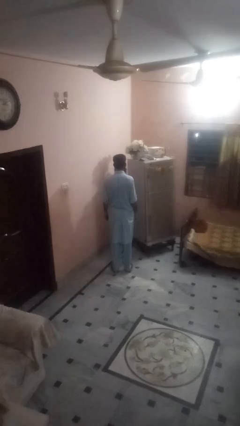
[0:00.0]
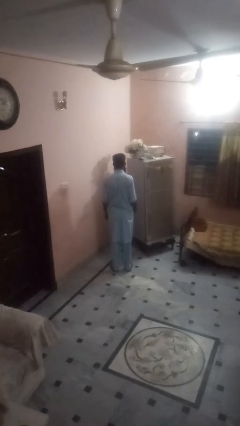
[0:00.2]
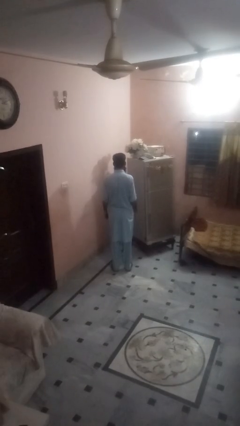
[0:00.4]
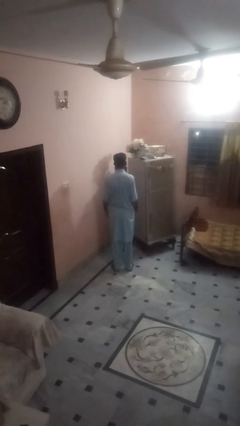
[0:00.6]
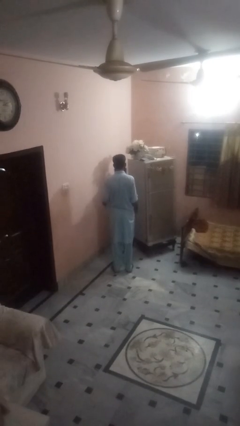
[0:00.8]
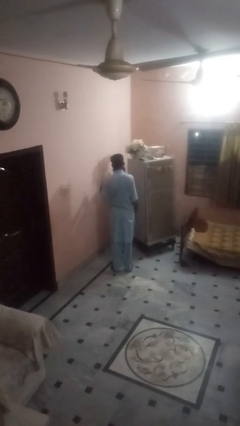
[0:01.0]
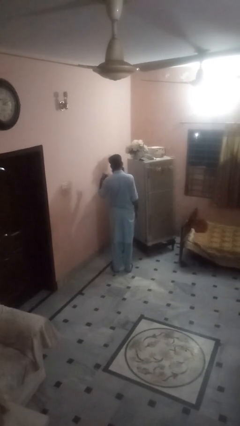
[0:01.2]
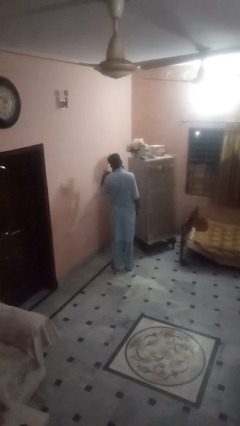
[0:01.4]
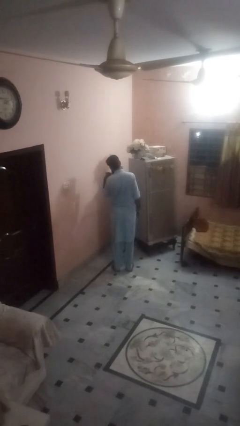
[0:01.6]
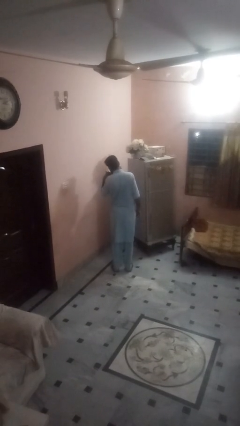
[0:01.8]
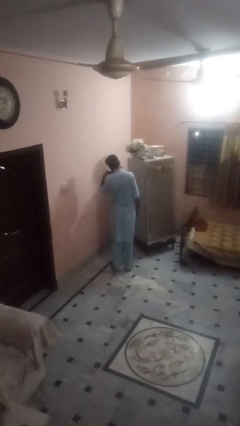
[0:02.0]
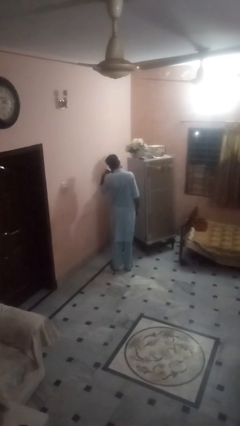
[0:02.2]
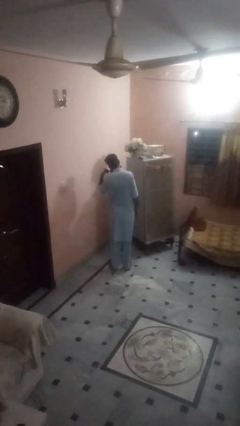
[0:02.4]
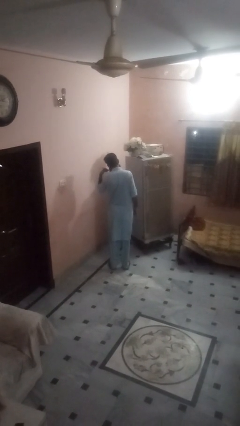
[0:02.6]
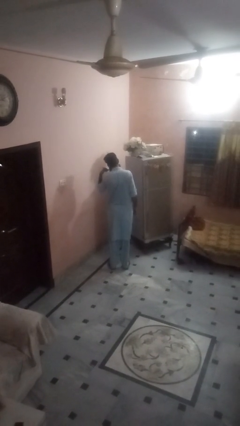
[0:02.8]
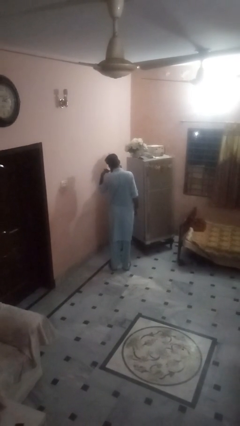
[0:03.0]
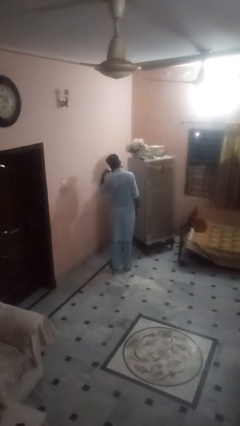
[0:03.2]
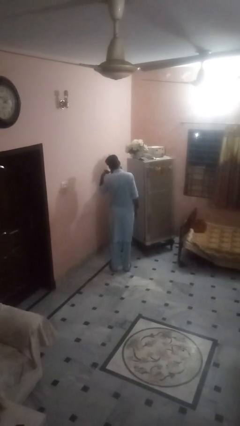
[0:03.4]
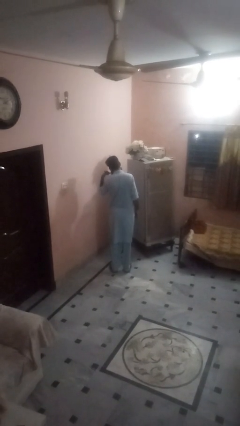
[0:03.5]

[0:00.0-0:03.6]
person gestures call me

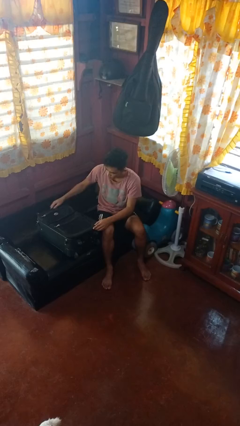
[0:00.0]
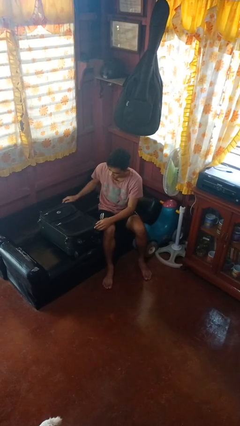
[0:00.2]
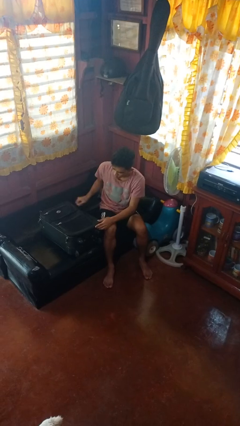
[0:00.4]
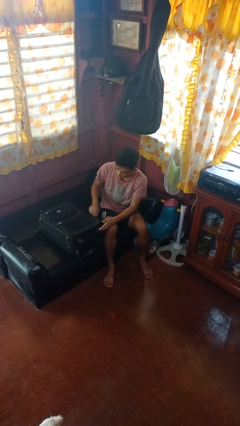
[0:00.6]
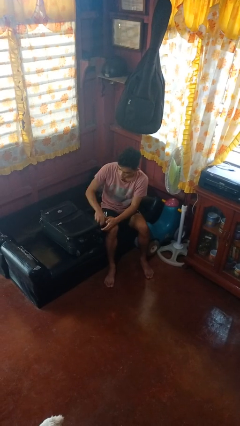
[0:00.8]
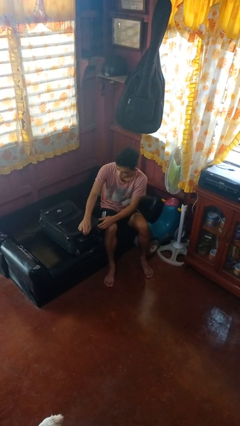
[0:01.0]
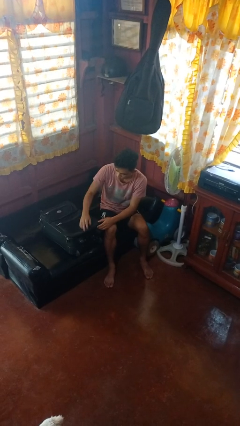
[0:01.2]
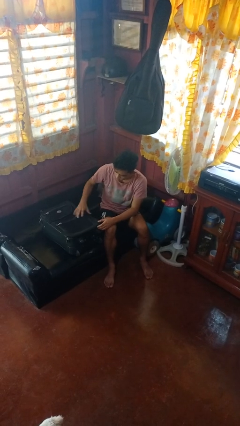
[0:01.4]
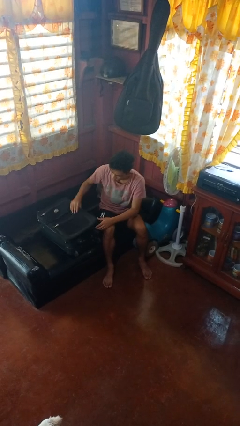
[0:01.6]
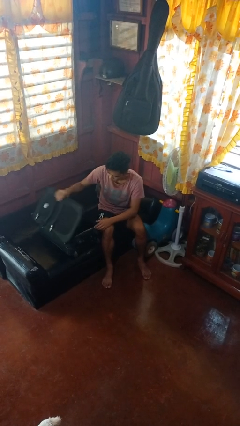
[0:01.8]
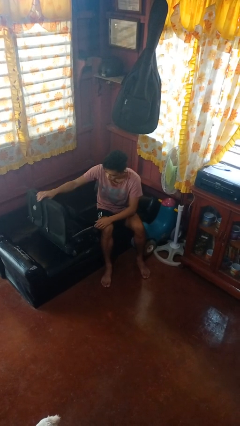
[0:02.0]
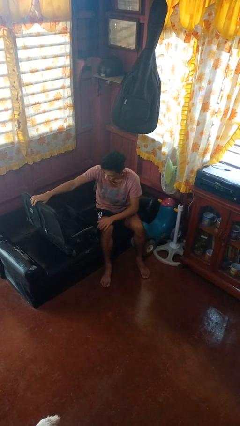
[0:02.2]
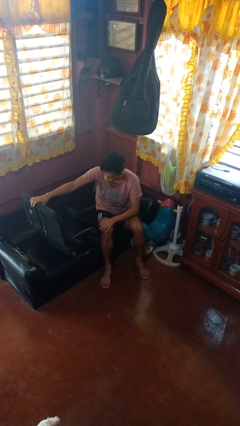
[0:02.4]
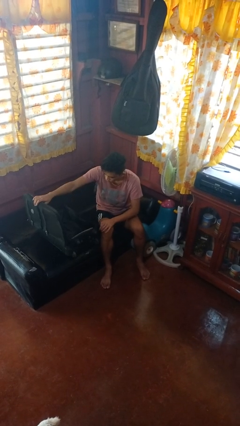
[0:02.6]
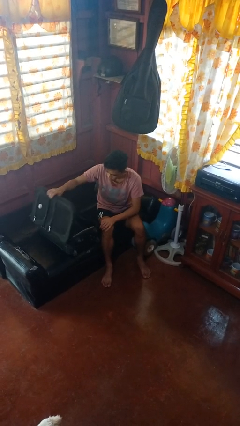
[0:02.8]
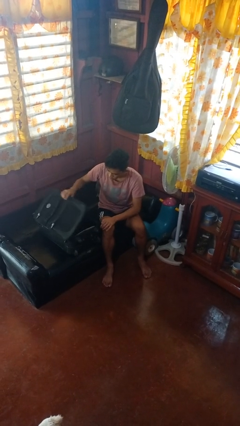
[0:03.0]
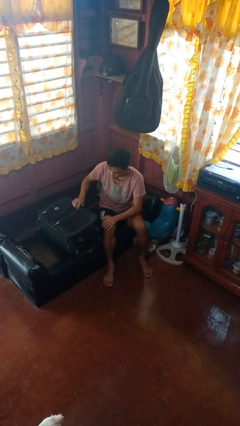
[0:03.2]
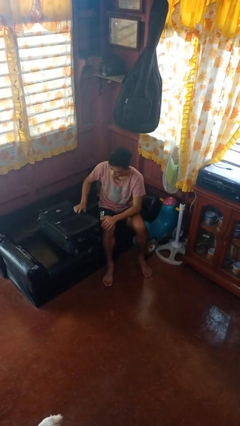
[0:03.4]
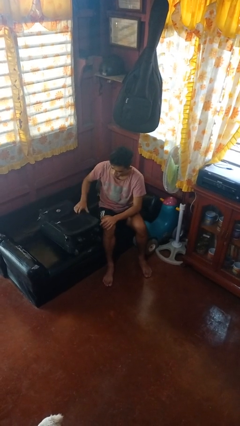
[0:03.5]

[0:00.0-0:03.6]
person opens suitcase

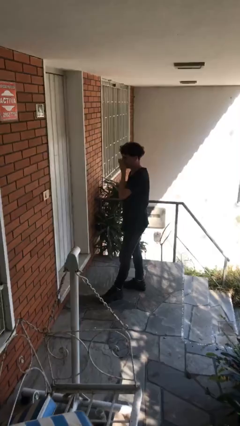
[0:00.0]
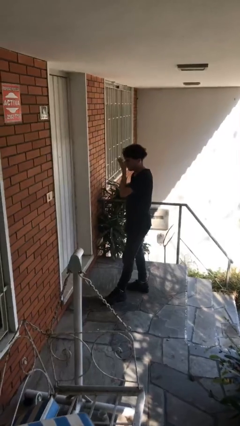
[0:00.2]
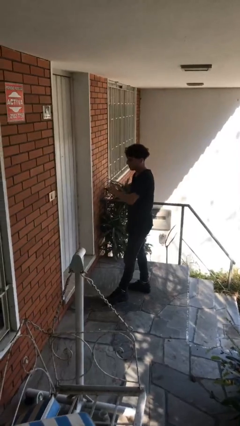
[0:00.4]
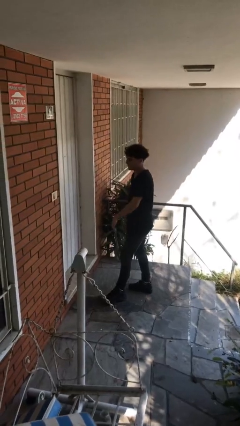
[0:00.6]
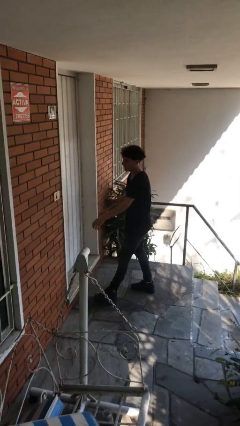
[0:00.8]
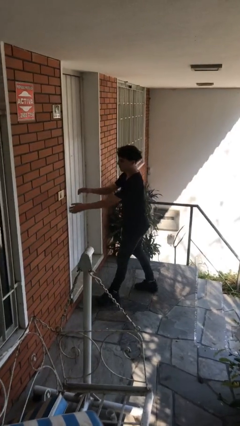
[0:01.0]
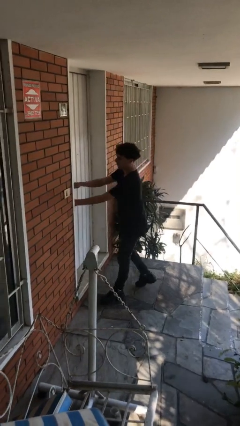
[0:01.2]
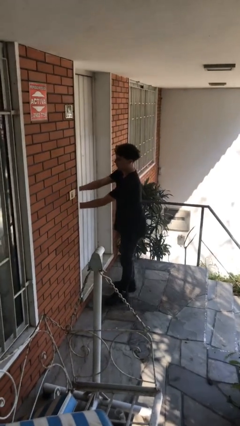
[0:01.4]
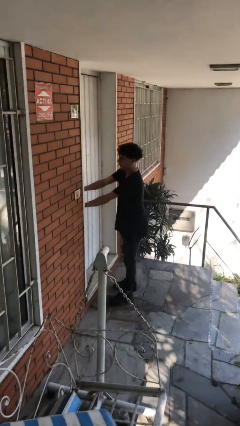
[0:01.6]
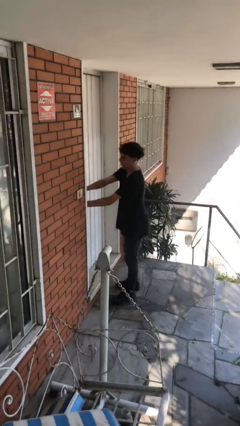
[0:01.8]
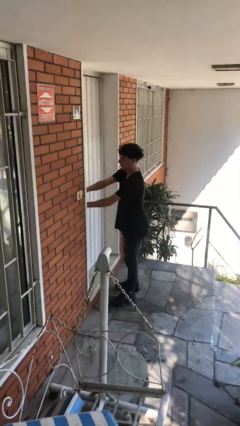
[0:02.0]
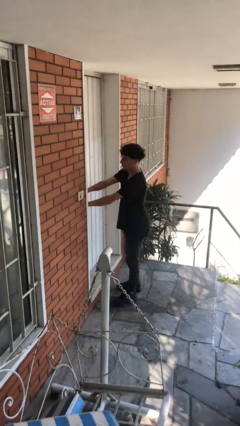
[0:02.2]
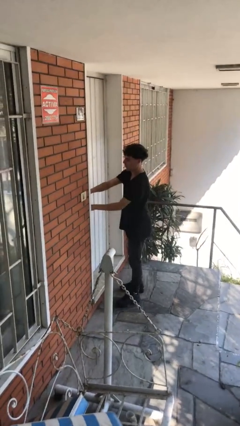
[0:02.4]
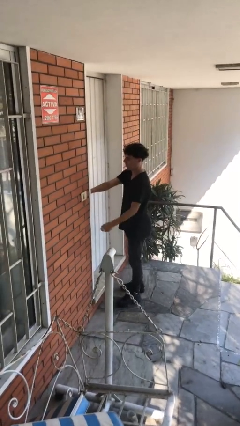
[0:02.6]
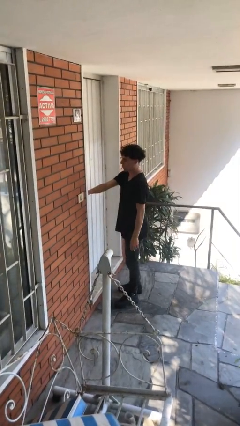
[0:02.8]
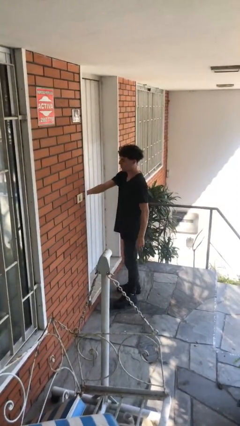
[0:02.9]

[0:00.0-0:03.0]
person unlocks door with keys

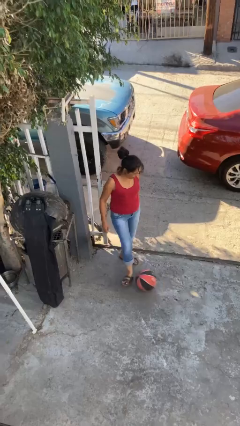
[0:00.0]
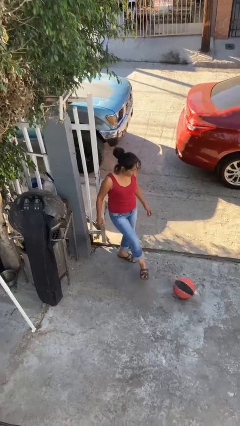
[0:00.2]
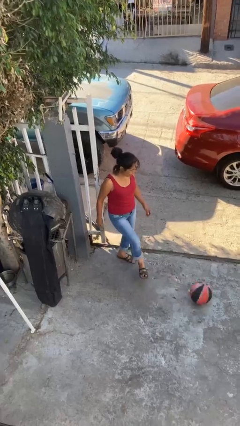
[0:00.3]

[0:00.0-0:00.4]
person kicks object to person

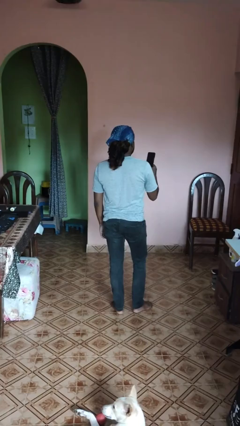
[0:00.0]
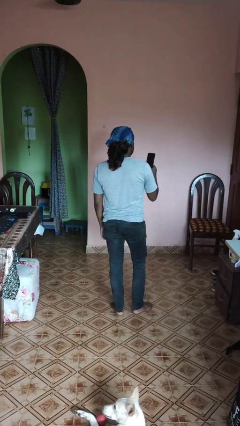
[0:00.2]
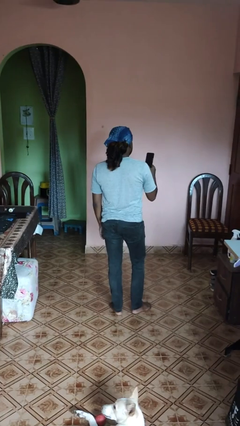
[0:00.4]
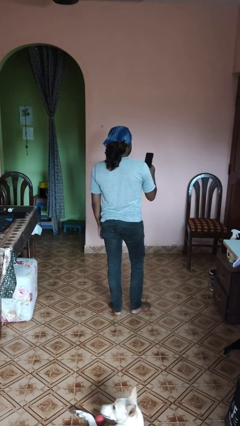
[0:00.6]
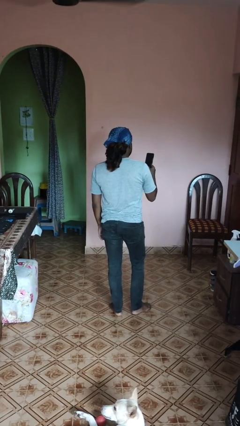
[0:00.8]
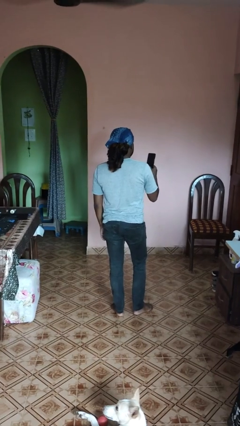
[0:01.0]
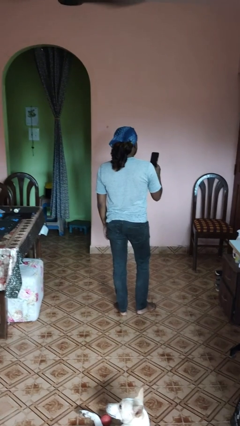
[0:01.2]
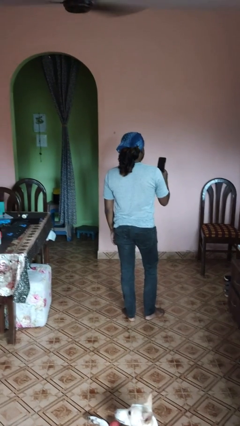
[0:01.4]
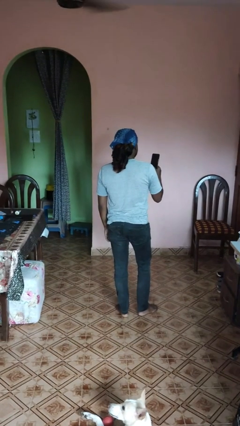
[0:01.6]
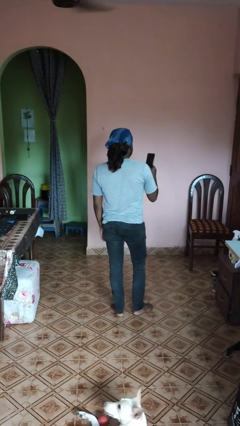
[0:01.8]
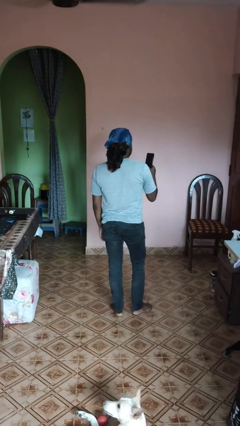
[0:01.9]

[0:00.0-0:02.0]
person takes phone from pocket

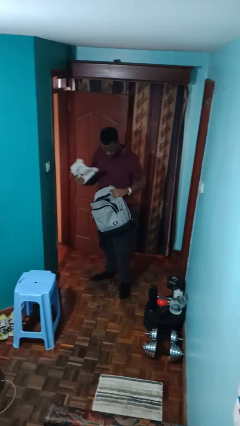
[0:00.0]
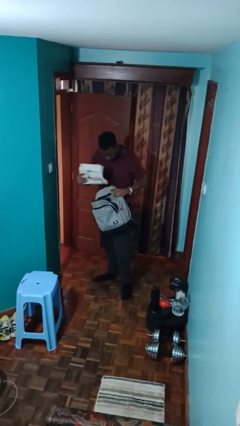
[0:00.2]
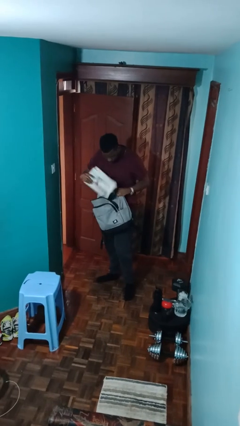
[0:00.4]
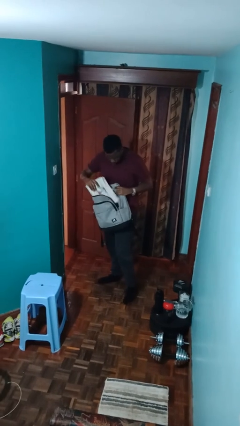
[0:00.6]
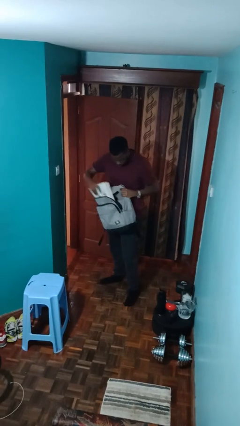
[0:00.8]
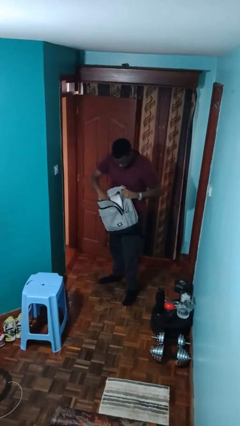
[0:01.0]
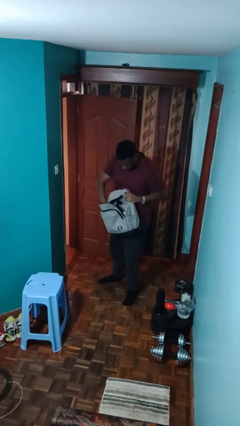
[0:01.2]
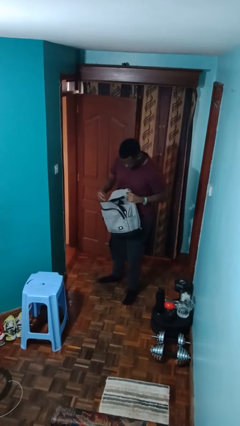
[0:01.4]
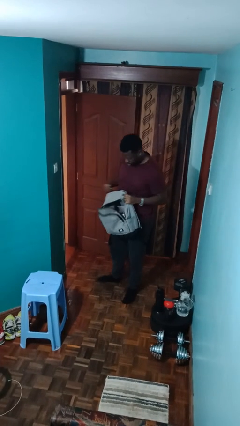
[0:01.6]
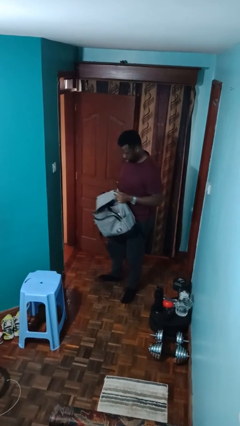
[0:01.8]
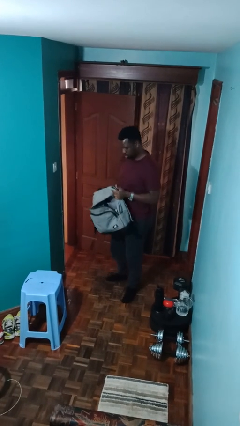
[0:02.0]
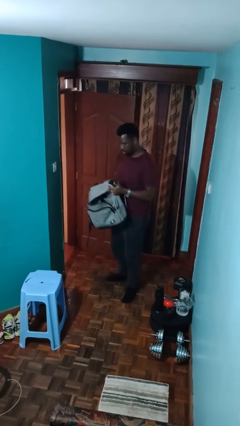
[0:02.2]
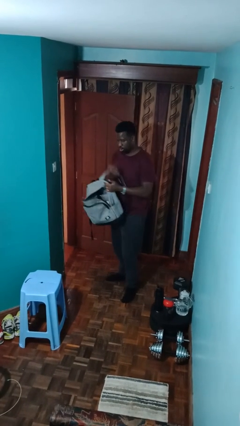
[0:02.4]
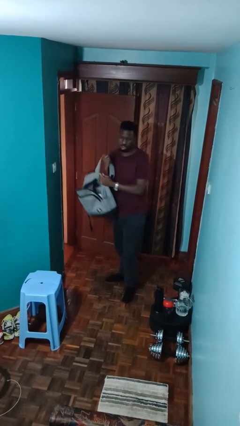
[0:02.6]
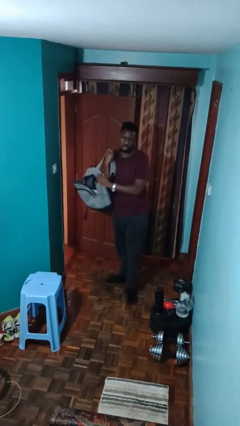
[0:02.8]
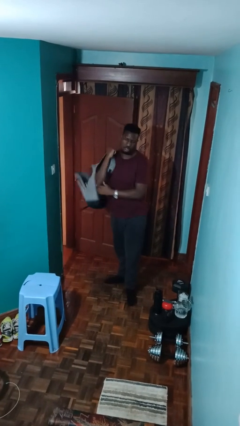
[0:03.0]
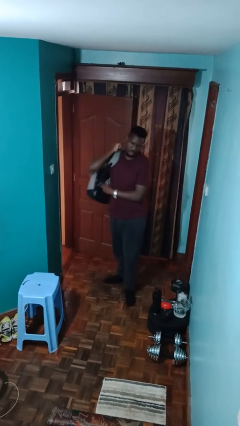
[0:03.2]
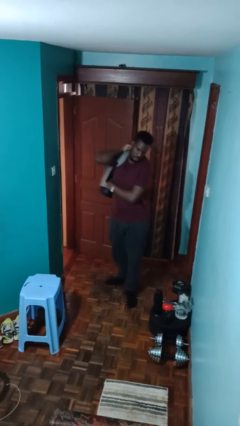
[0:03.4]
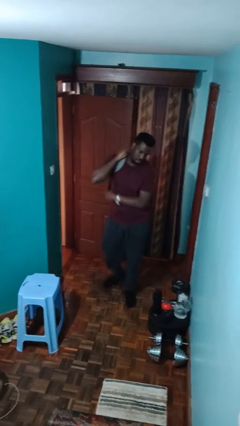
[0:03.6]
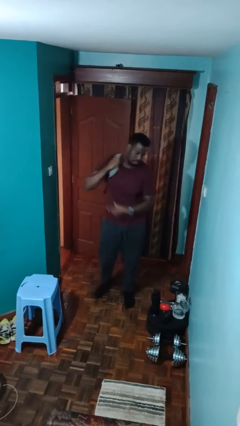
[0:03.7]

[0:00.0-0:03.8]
person puts object into backpack

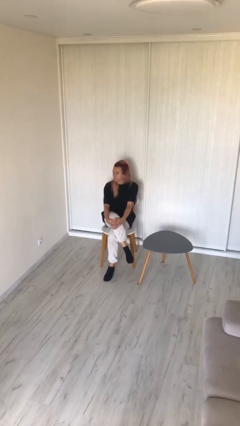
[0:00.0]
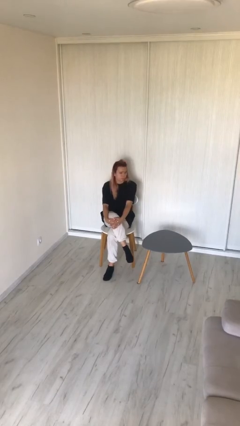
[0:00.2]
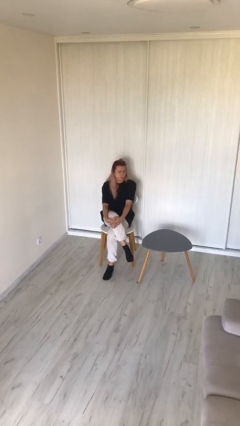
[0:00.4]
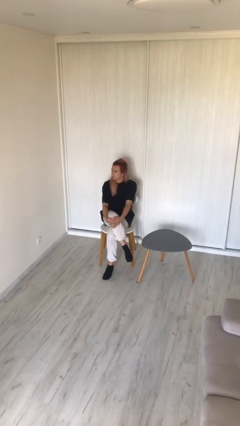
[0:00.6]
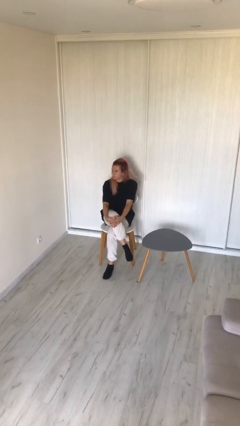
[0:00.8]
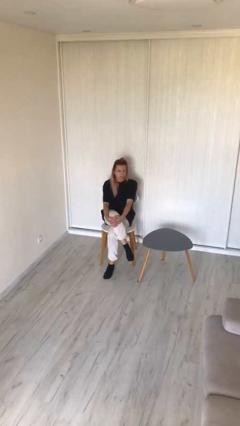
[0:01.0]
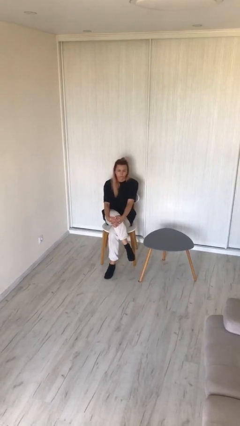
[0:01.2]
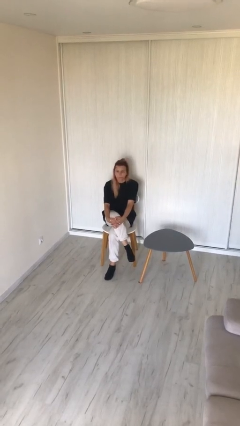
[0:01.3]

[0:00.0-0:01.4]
person shakes head
